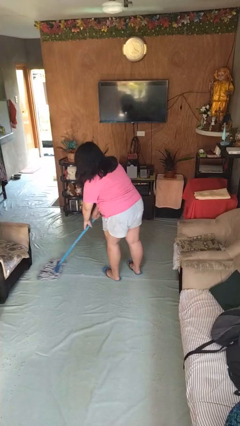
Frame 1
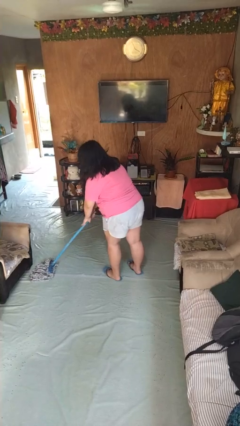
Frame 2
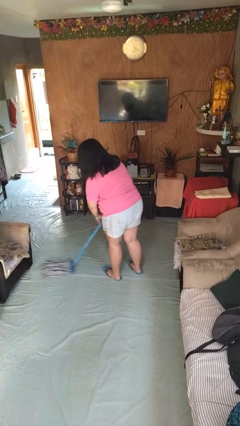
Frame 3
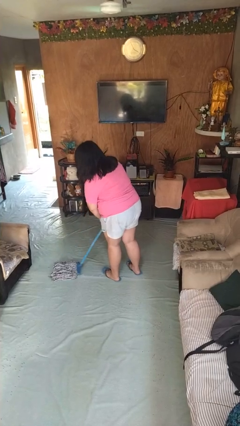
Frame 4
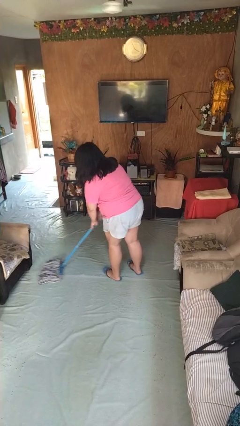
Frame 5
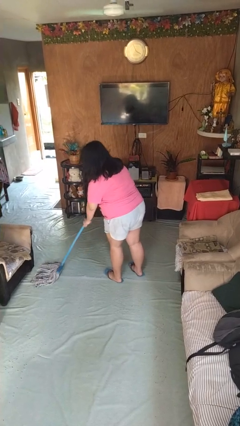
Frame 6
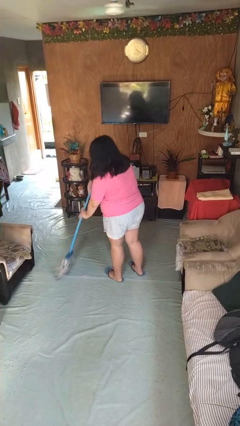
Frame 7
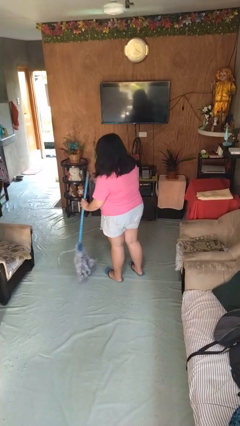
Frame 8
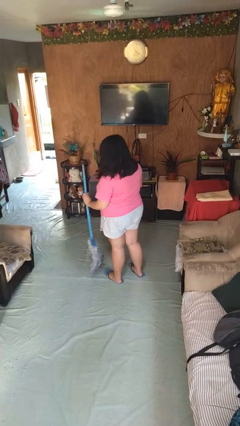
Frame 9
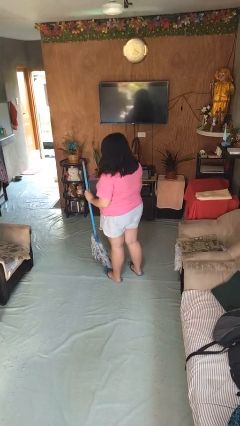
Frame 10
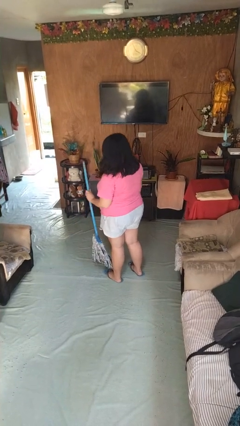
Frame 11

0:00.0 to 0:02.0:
person mops

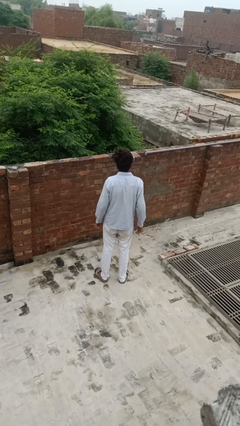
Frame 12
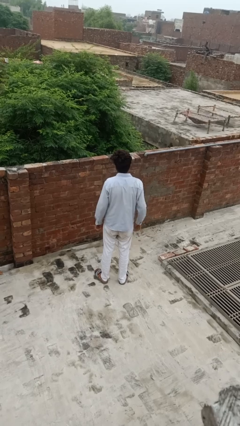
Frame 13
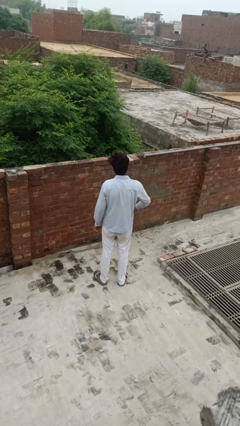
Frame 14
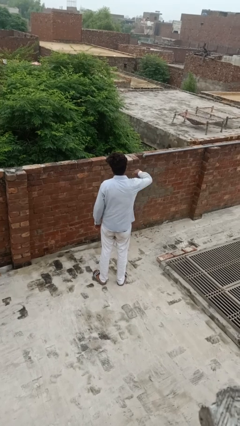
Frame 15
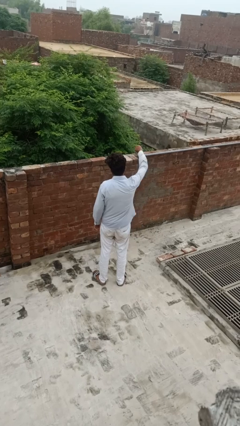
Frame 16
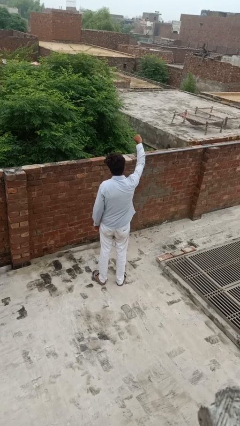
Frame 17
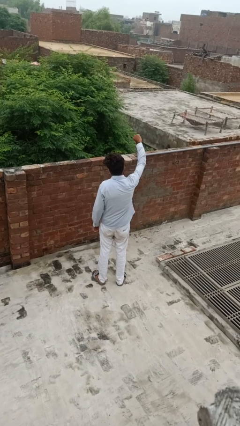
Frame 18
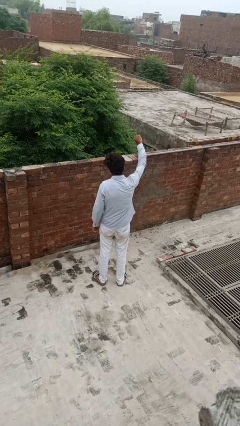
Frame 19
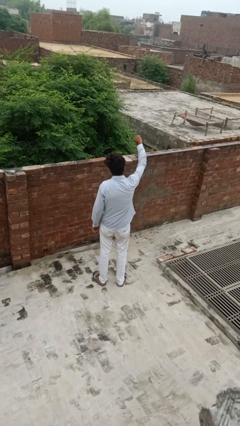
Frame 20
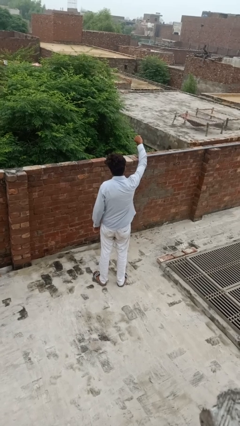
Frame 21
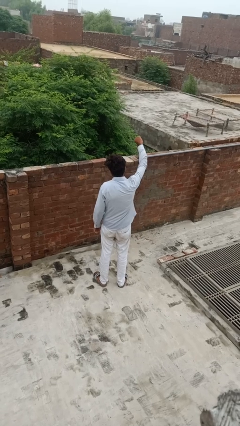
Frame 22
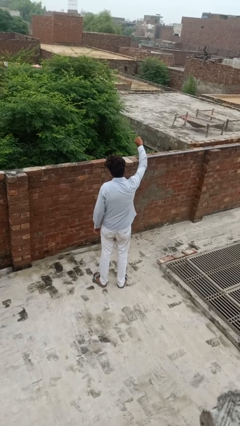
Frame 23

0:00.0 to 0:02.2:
person gestures thumbs down

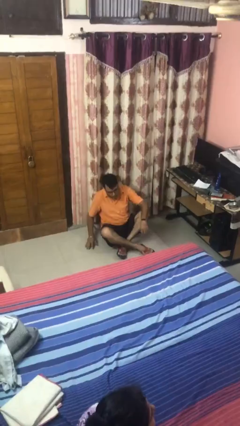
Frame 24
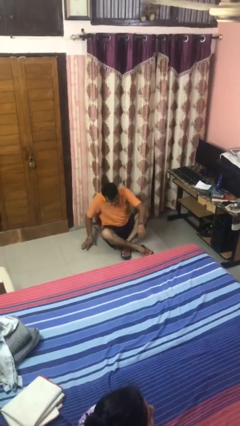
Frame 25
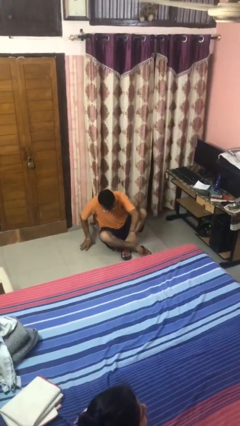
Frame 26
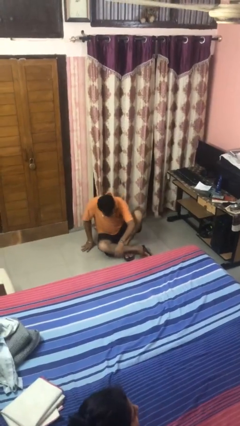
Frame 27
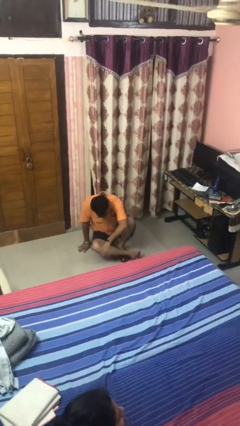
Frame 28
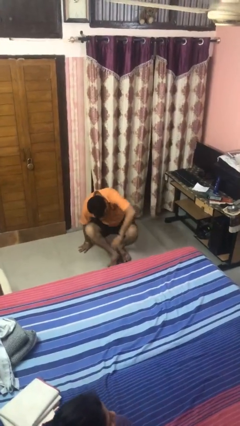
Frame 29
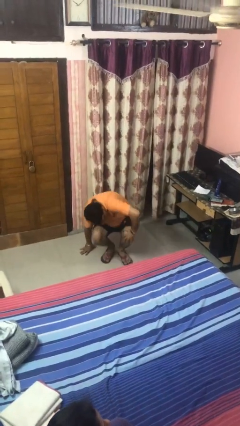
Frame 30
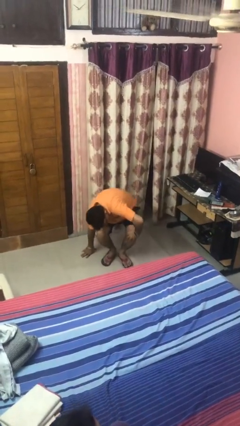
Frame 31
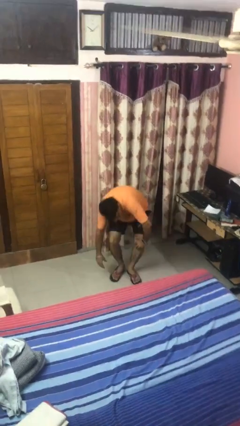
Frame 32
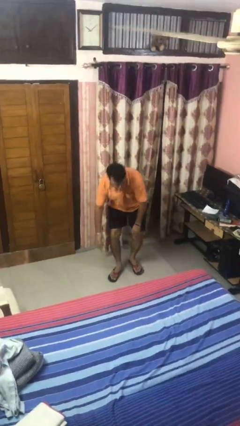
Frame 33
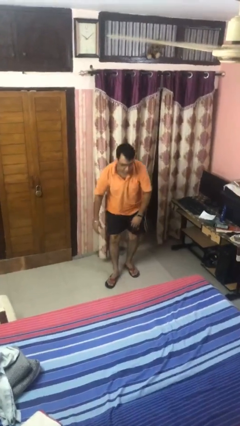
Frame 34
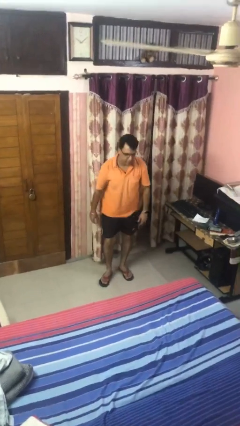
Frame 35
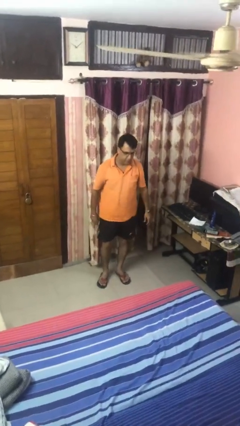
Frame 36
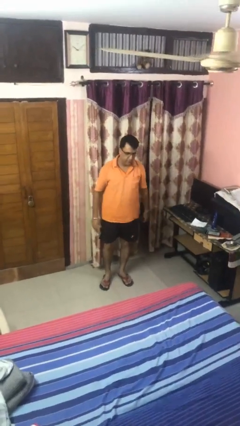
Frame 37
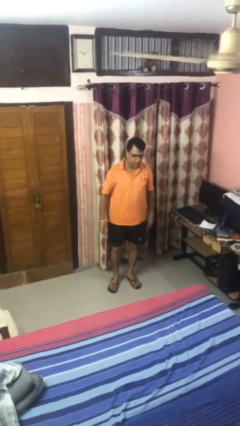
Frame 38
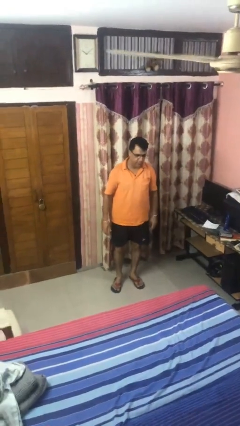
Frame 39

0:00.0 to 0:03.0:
person stands up from floor

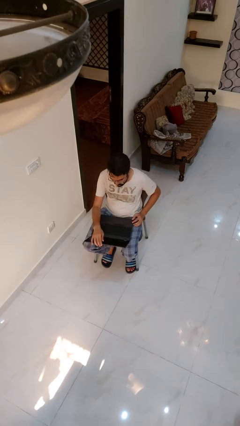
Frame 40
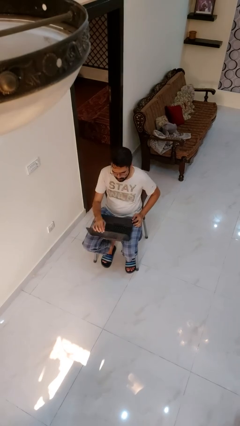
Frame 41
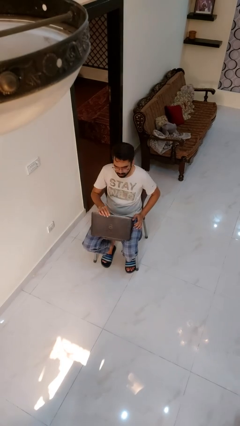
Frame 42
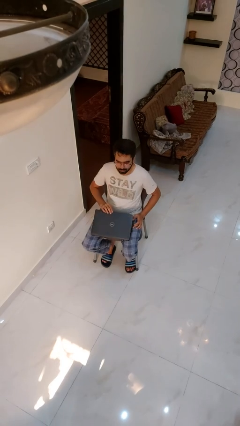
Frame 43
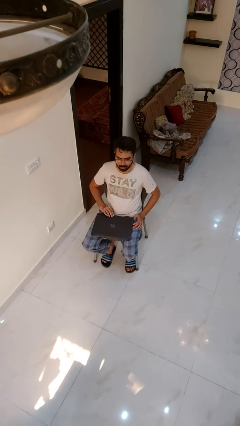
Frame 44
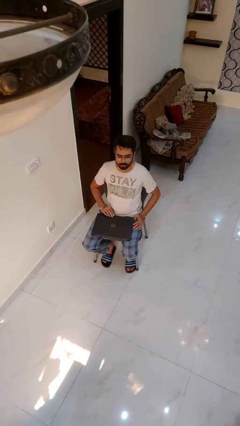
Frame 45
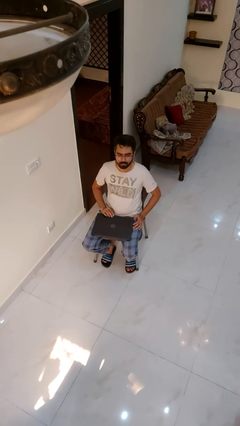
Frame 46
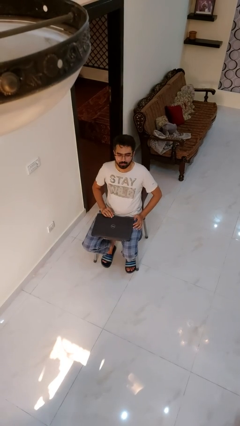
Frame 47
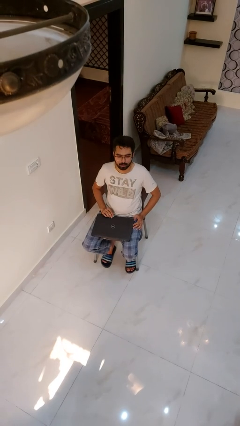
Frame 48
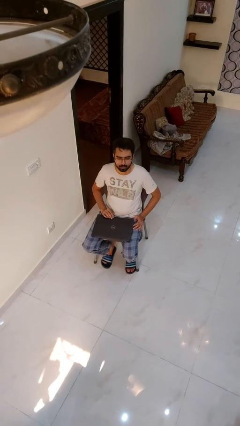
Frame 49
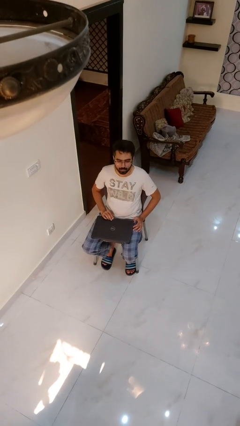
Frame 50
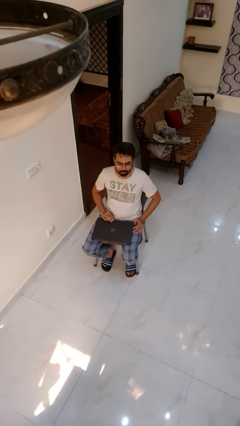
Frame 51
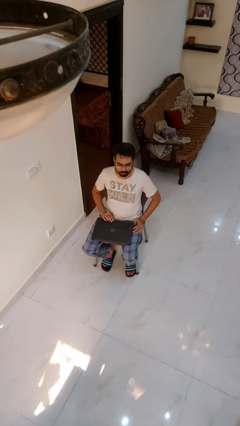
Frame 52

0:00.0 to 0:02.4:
person closes laptop

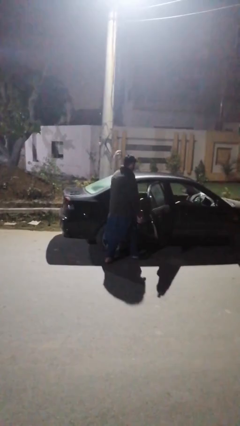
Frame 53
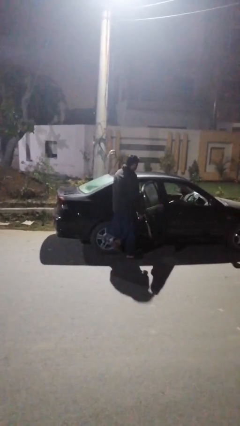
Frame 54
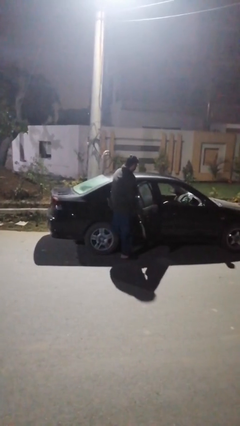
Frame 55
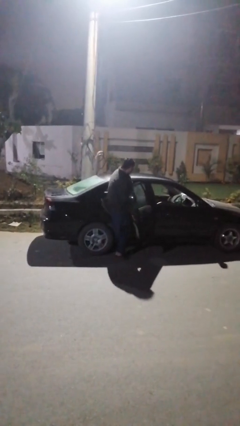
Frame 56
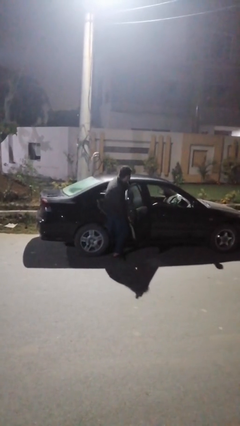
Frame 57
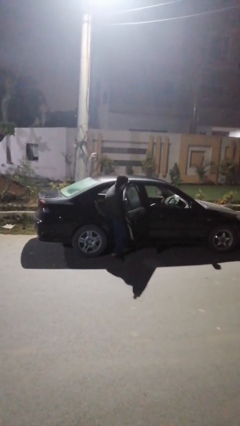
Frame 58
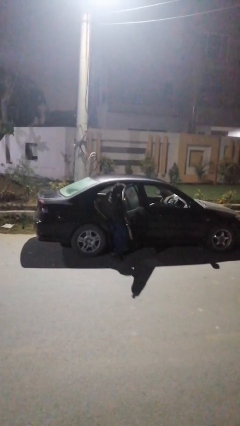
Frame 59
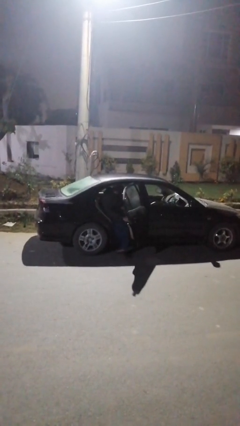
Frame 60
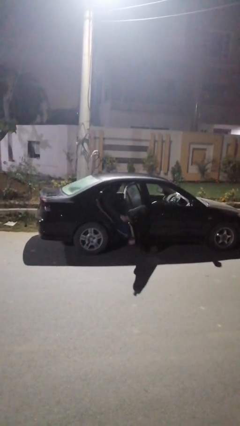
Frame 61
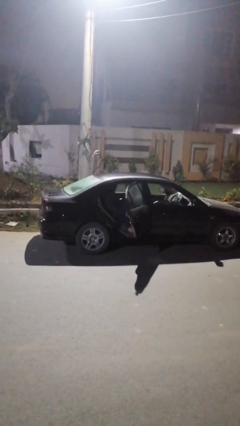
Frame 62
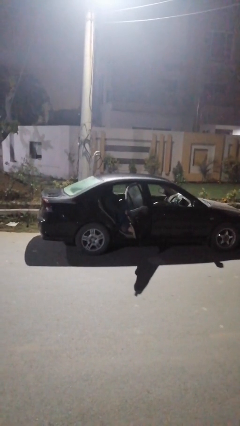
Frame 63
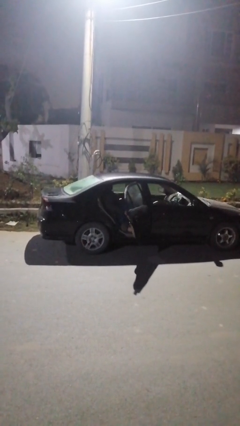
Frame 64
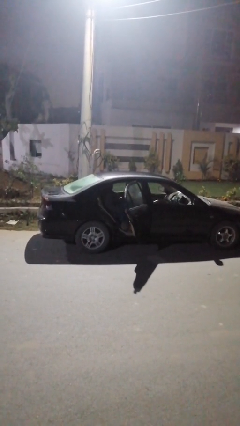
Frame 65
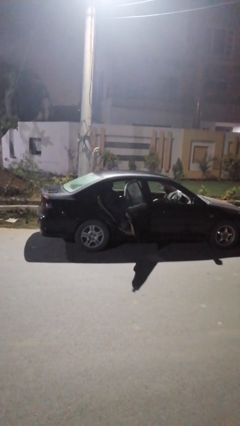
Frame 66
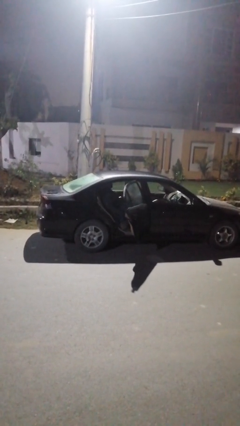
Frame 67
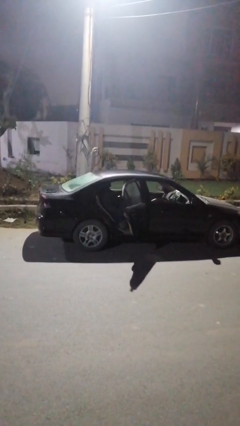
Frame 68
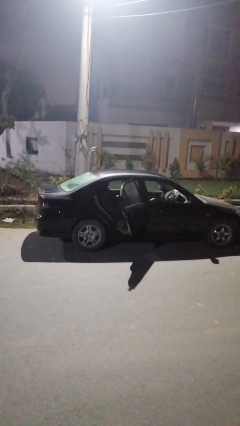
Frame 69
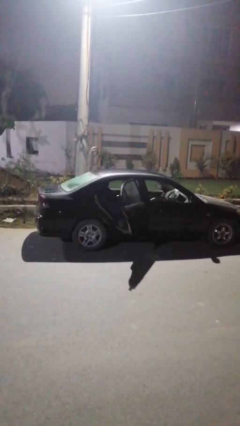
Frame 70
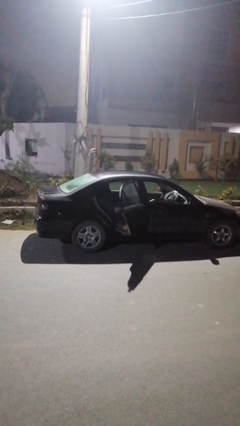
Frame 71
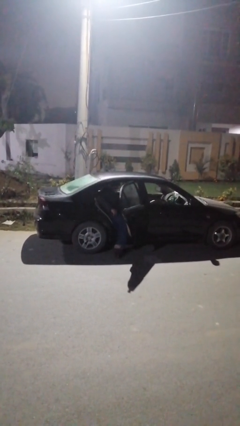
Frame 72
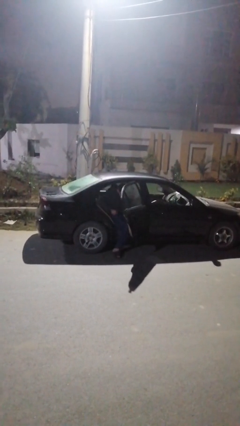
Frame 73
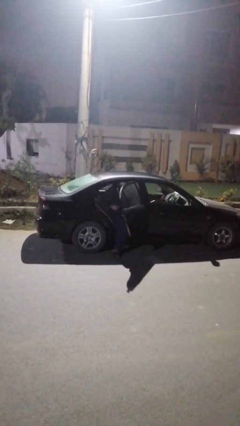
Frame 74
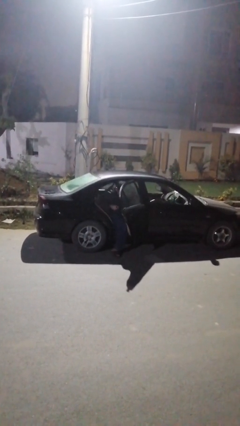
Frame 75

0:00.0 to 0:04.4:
person enters car

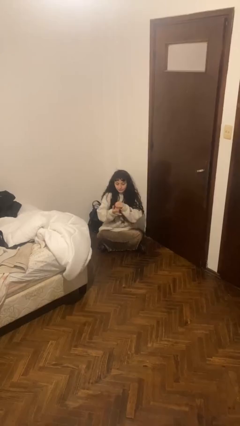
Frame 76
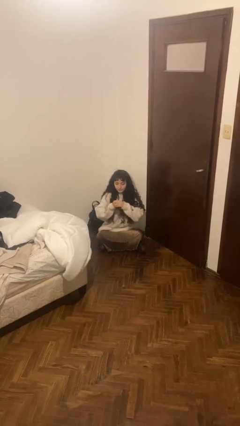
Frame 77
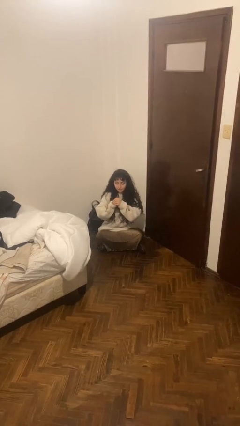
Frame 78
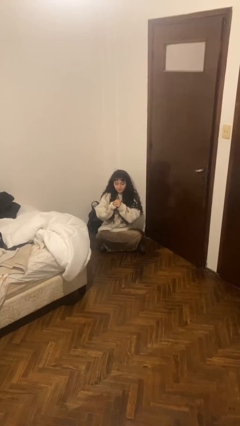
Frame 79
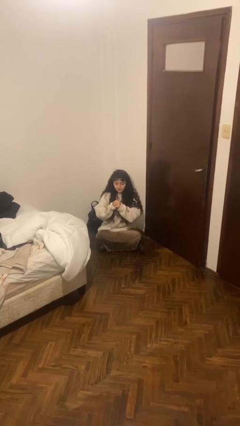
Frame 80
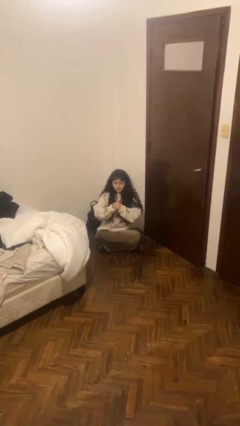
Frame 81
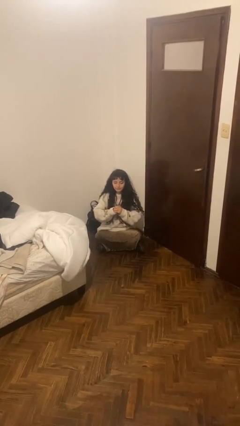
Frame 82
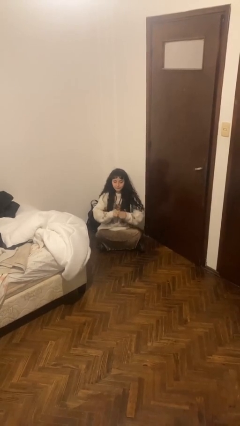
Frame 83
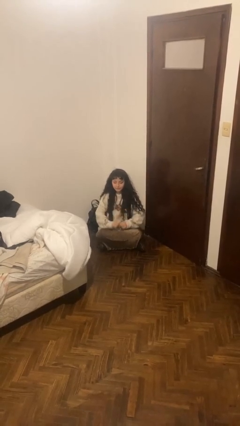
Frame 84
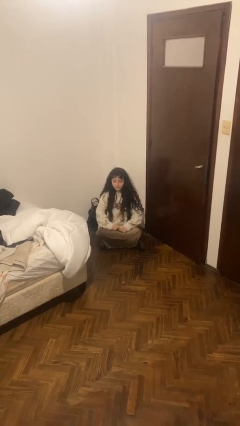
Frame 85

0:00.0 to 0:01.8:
person cracks knuckles

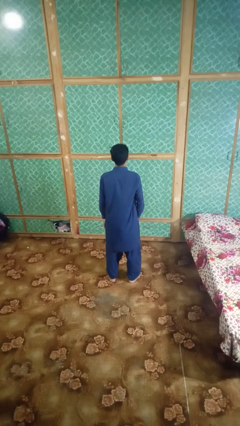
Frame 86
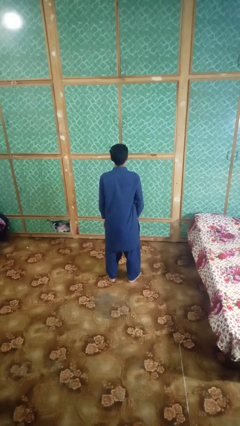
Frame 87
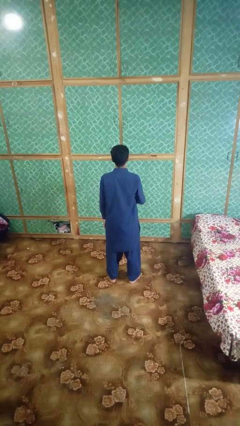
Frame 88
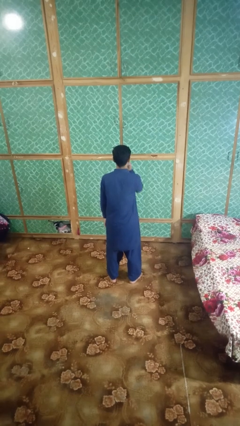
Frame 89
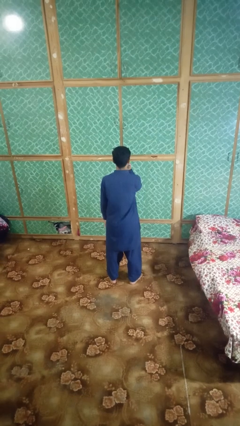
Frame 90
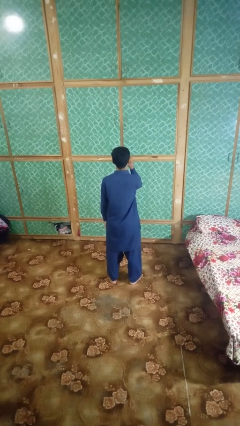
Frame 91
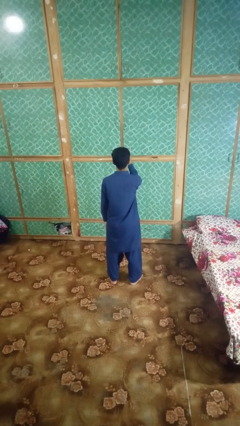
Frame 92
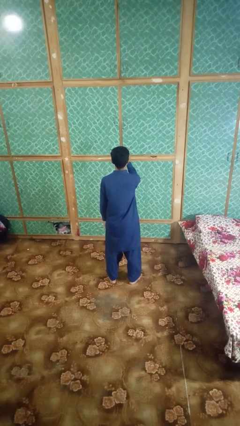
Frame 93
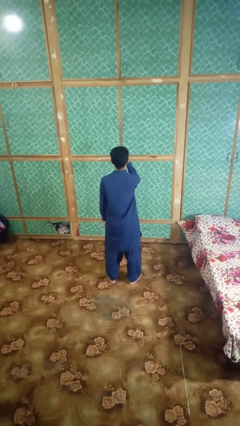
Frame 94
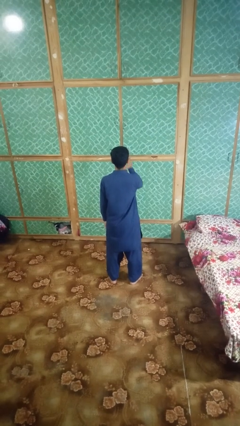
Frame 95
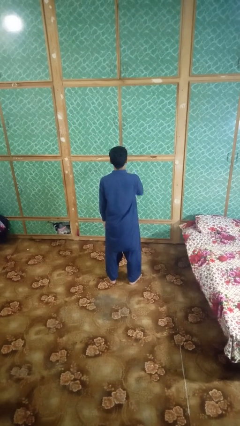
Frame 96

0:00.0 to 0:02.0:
person gestures watch closely
